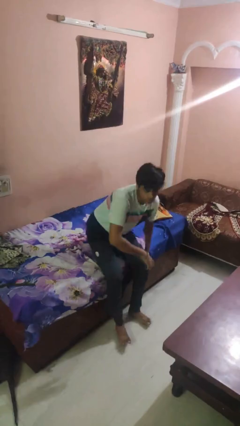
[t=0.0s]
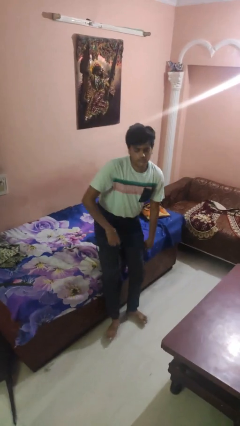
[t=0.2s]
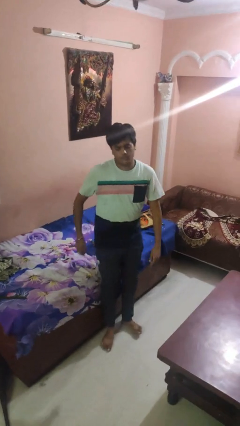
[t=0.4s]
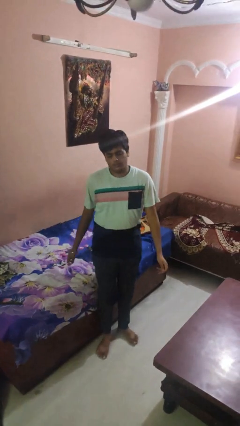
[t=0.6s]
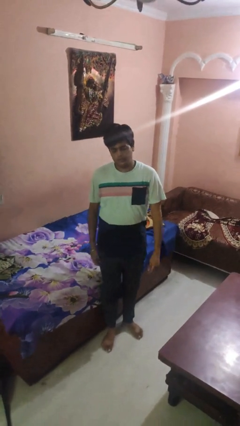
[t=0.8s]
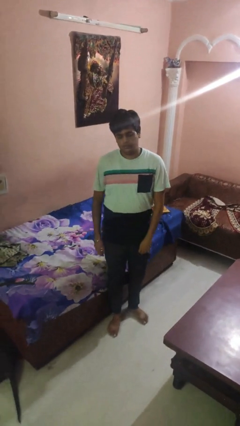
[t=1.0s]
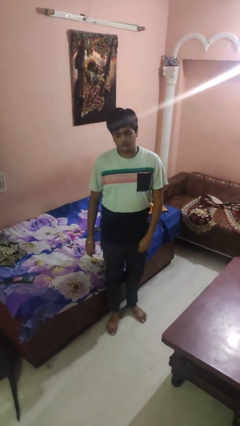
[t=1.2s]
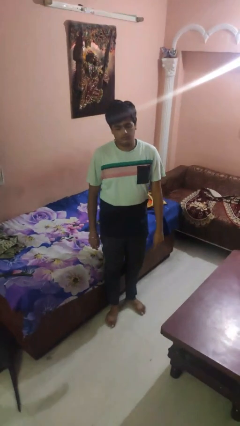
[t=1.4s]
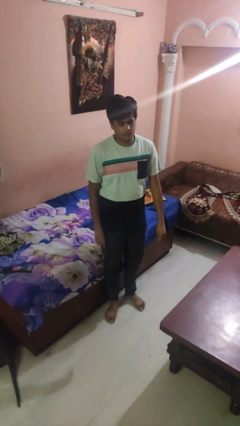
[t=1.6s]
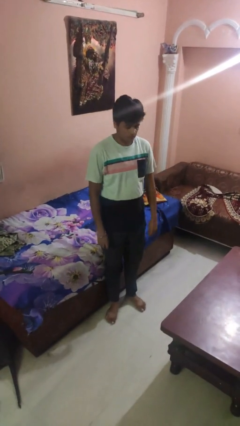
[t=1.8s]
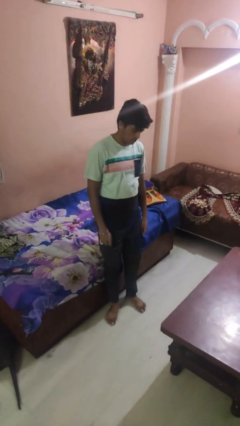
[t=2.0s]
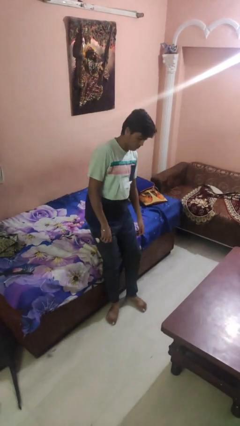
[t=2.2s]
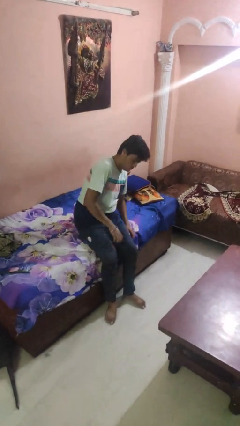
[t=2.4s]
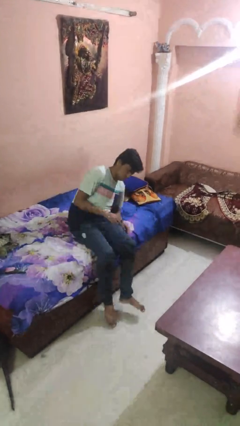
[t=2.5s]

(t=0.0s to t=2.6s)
person stands up

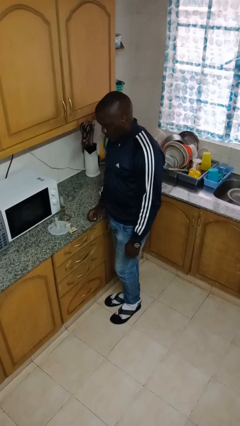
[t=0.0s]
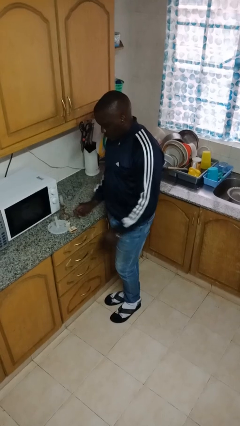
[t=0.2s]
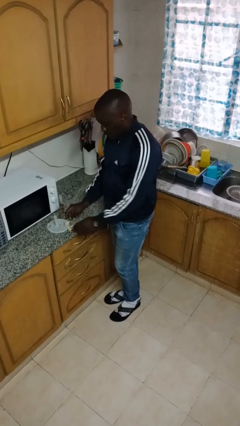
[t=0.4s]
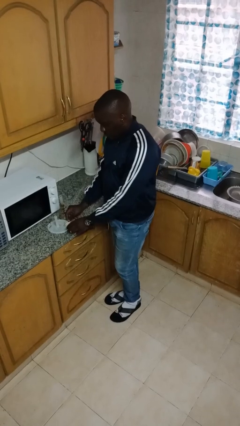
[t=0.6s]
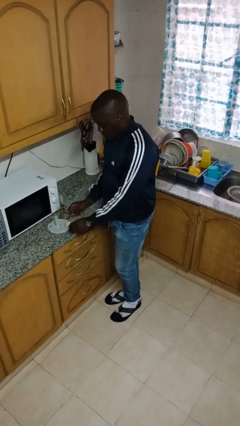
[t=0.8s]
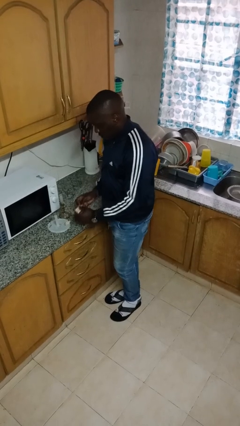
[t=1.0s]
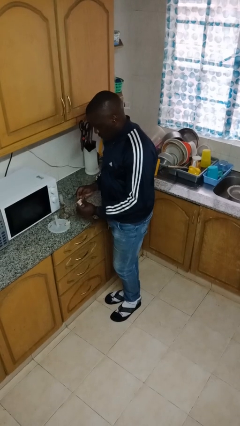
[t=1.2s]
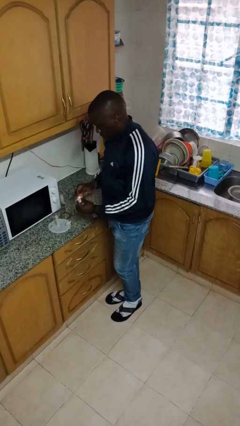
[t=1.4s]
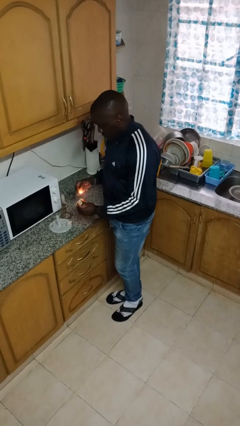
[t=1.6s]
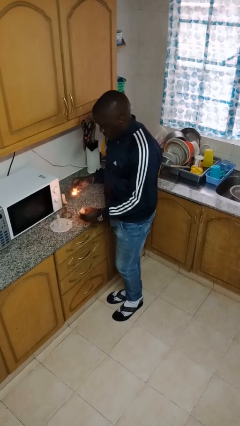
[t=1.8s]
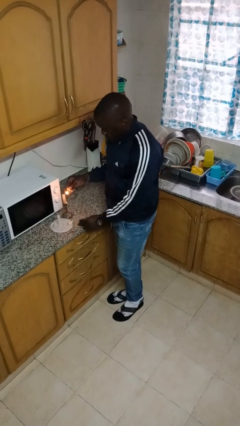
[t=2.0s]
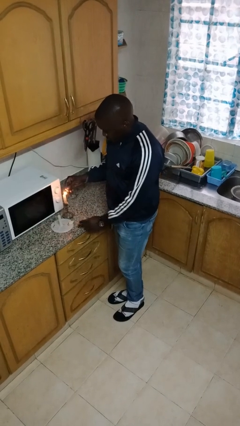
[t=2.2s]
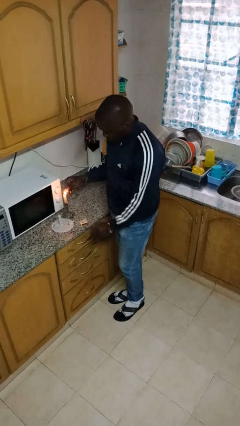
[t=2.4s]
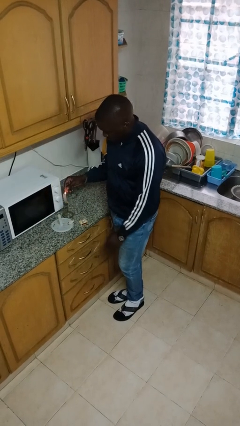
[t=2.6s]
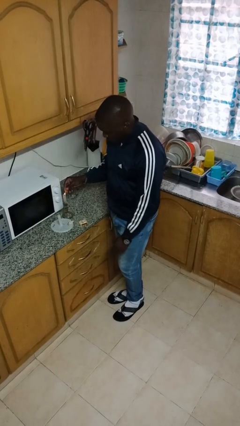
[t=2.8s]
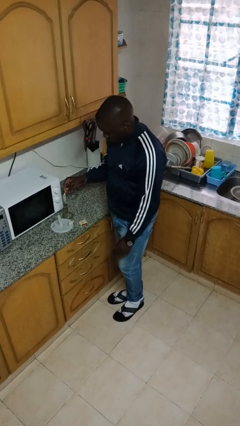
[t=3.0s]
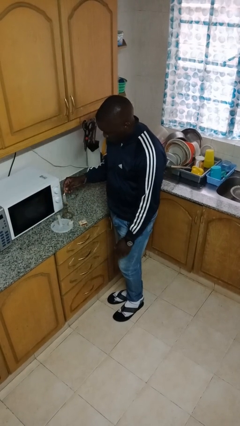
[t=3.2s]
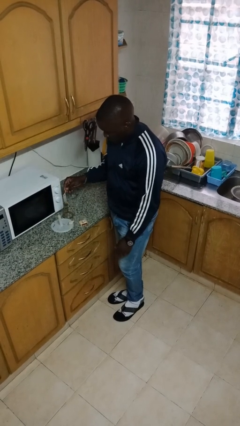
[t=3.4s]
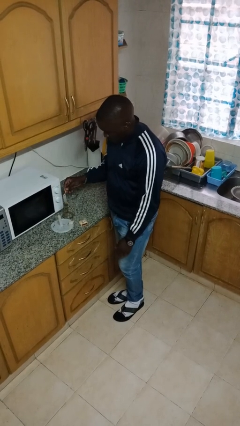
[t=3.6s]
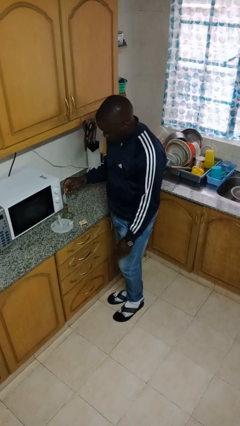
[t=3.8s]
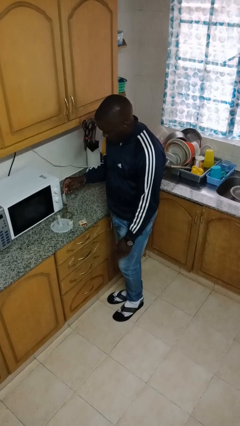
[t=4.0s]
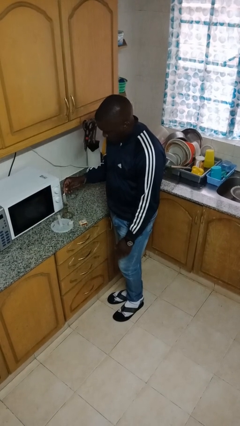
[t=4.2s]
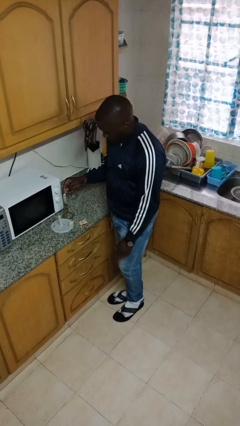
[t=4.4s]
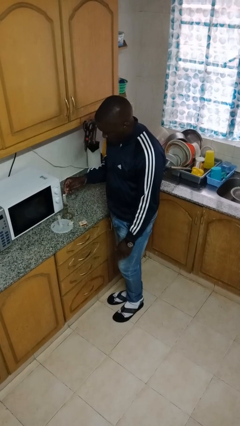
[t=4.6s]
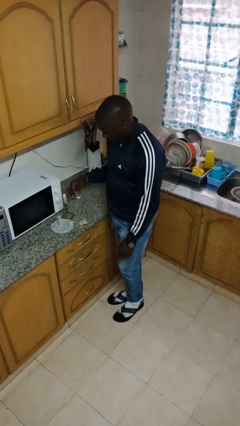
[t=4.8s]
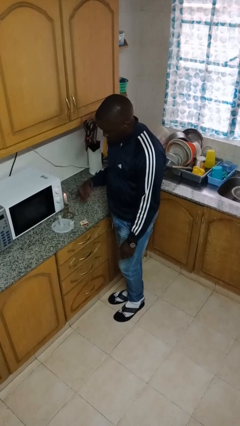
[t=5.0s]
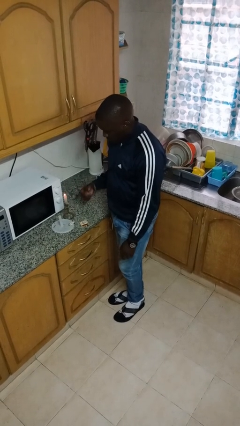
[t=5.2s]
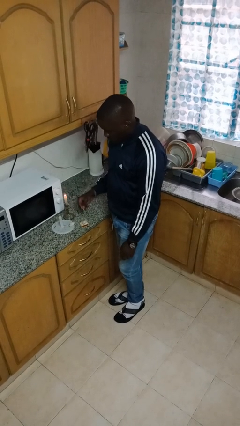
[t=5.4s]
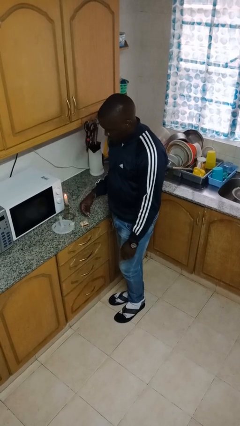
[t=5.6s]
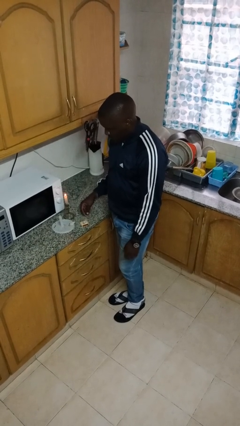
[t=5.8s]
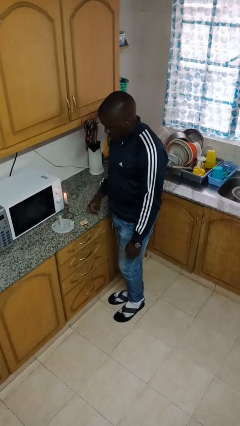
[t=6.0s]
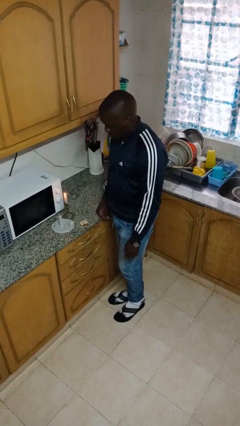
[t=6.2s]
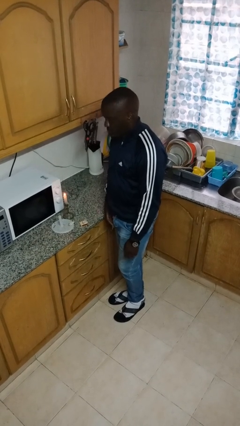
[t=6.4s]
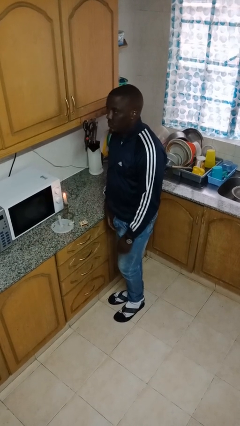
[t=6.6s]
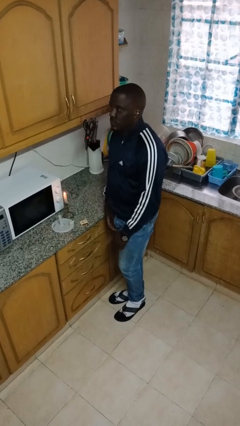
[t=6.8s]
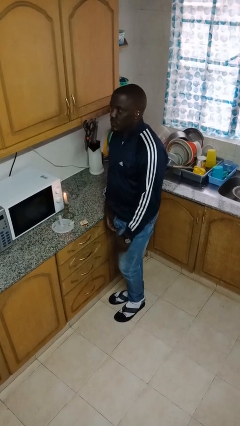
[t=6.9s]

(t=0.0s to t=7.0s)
person lights candle

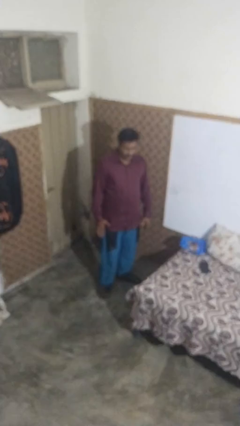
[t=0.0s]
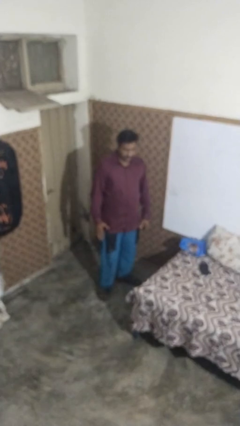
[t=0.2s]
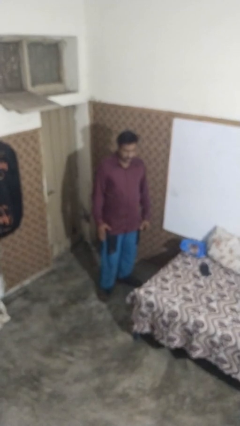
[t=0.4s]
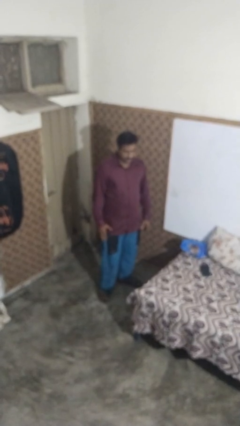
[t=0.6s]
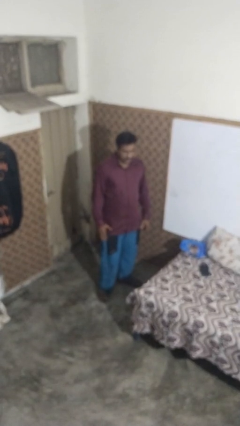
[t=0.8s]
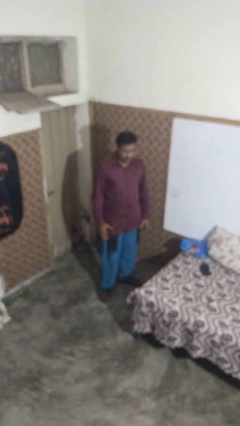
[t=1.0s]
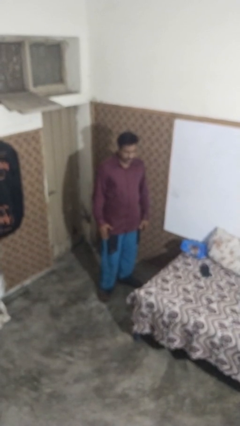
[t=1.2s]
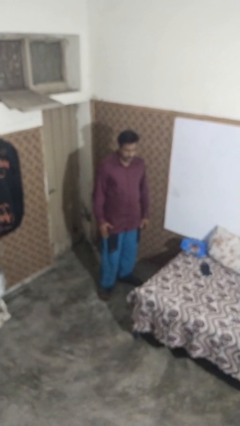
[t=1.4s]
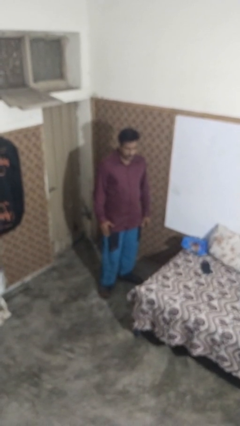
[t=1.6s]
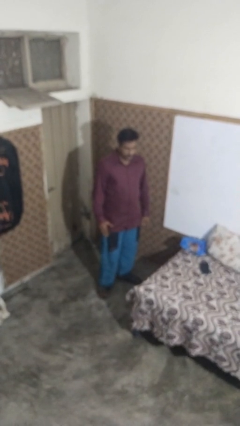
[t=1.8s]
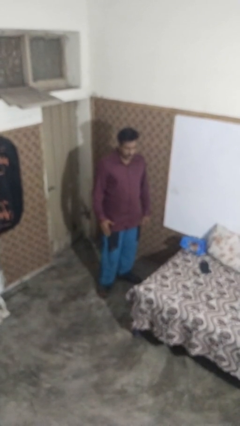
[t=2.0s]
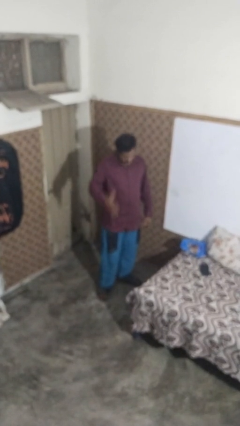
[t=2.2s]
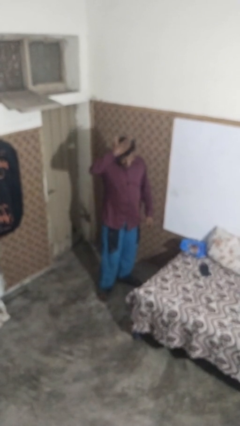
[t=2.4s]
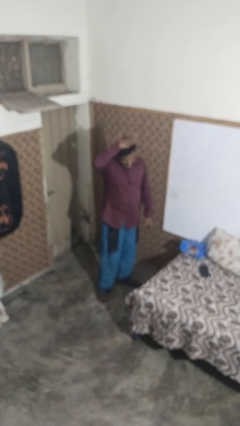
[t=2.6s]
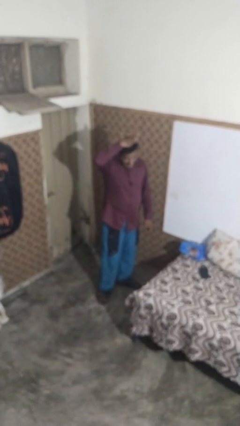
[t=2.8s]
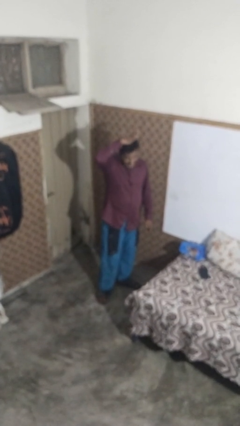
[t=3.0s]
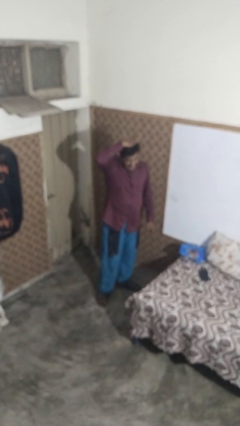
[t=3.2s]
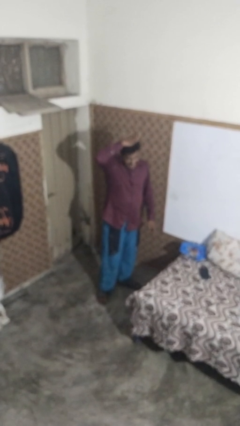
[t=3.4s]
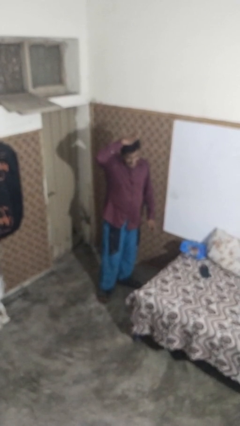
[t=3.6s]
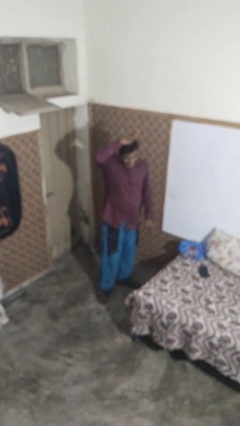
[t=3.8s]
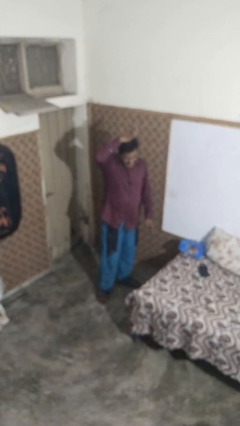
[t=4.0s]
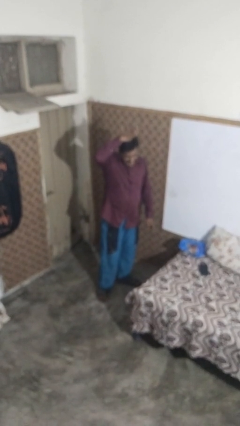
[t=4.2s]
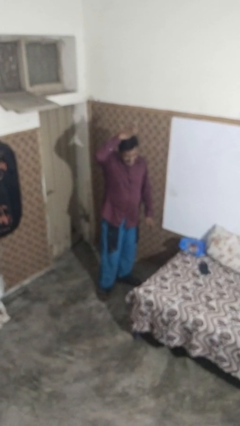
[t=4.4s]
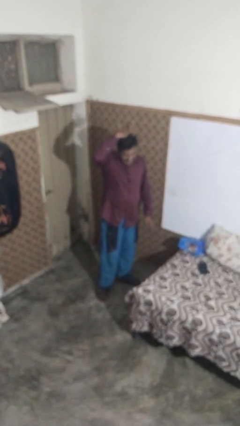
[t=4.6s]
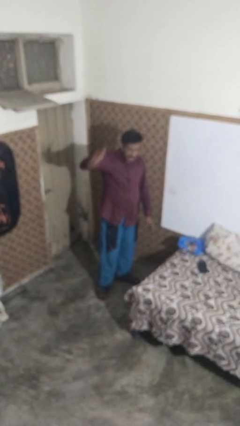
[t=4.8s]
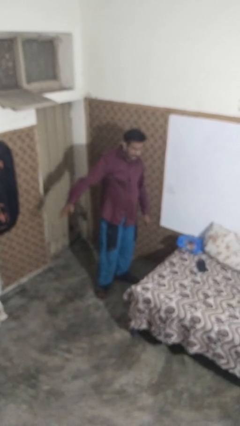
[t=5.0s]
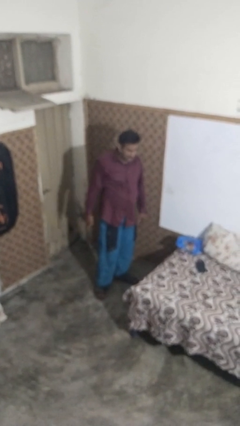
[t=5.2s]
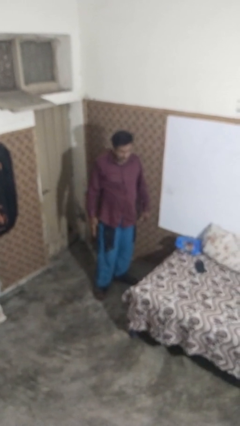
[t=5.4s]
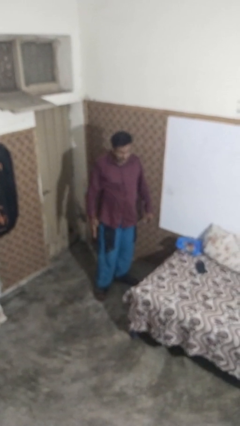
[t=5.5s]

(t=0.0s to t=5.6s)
person pats head

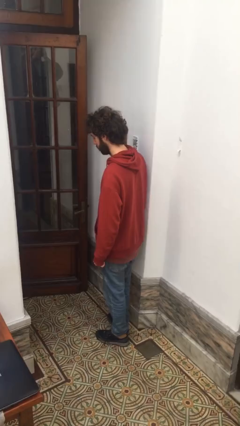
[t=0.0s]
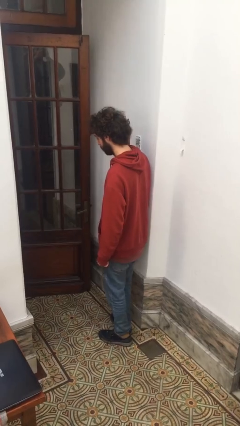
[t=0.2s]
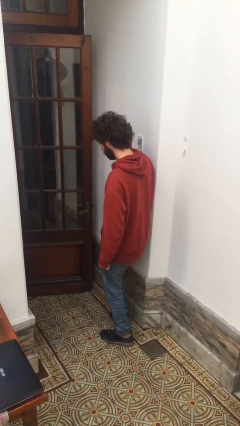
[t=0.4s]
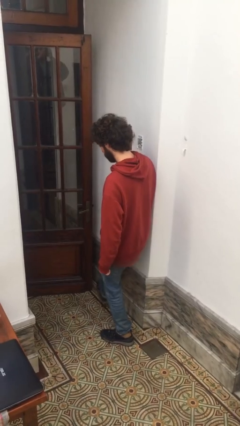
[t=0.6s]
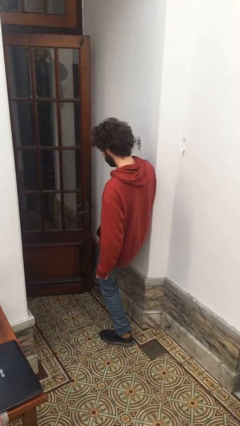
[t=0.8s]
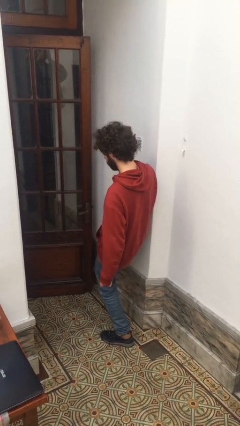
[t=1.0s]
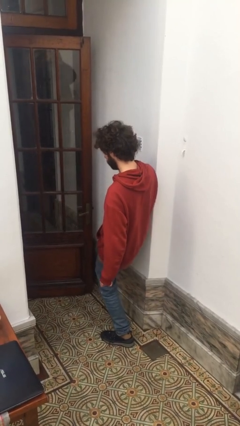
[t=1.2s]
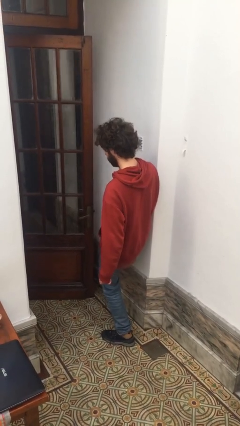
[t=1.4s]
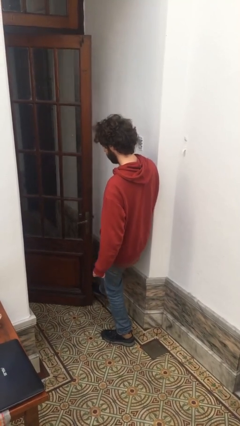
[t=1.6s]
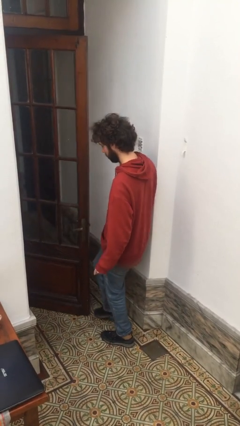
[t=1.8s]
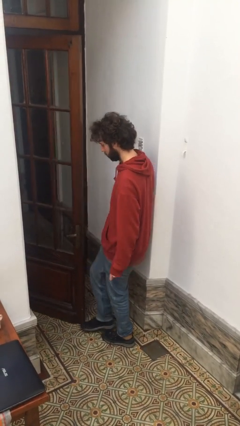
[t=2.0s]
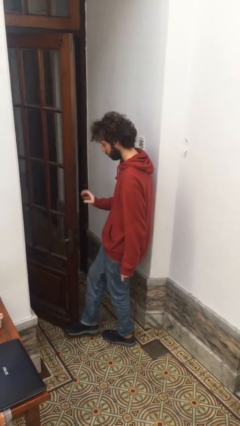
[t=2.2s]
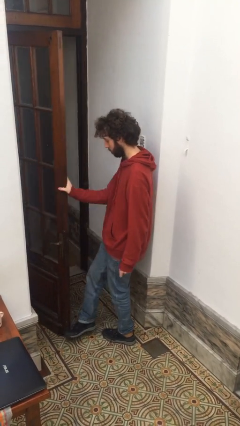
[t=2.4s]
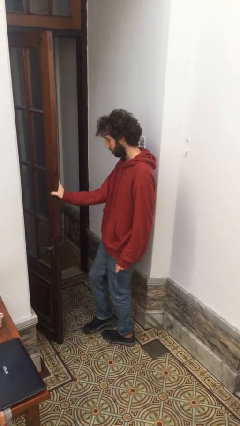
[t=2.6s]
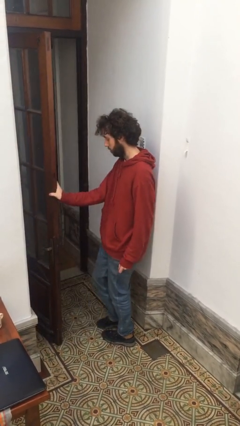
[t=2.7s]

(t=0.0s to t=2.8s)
person opens facility door
